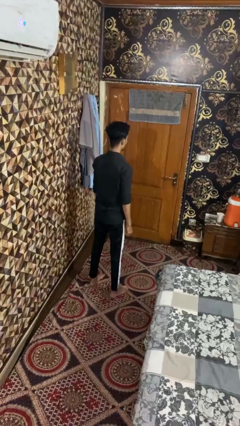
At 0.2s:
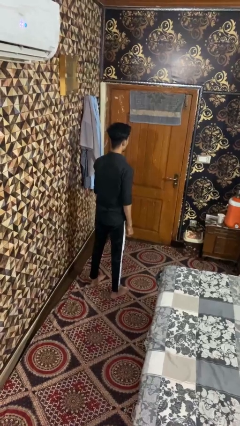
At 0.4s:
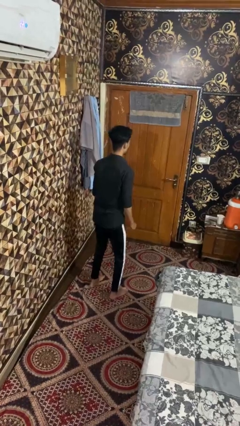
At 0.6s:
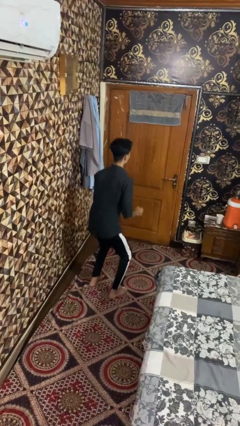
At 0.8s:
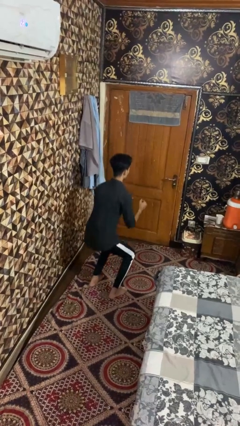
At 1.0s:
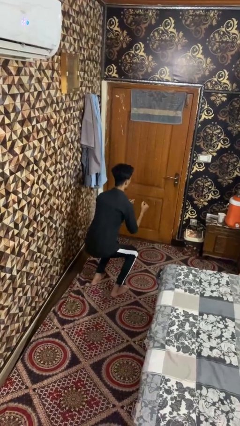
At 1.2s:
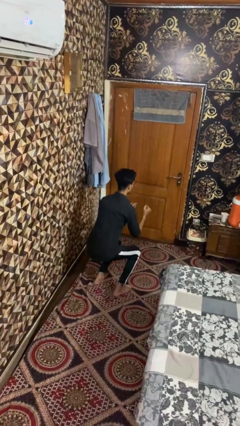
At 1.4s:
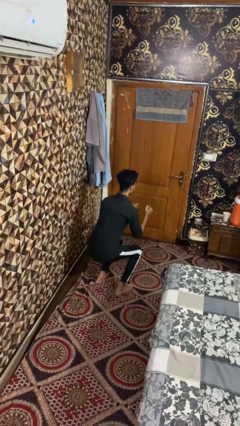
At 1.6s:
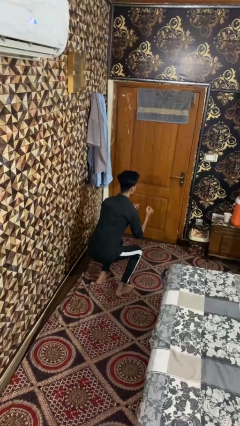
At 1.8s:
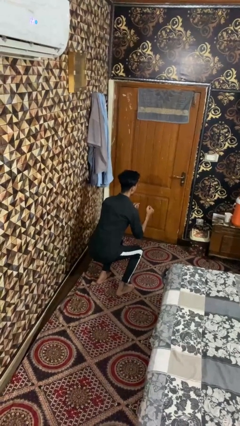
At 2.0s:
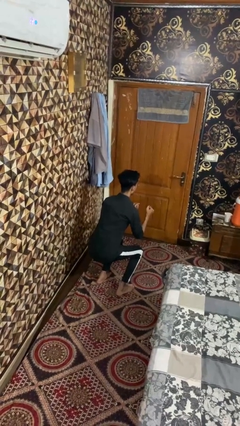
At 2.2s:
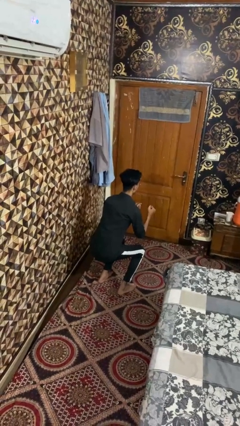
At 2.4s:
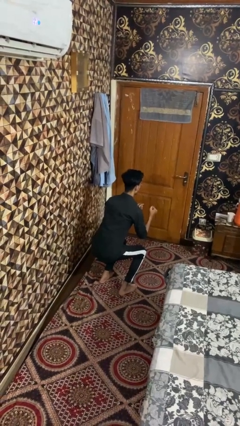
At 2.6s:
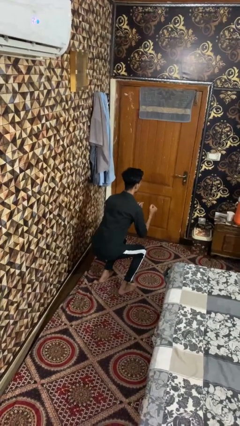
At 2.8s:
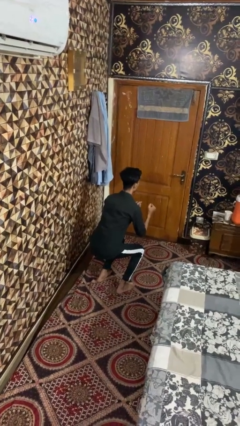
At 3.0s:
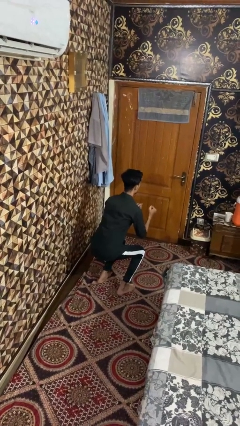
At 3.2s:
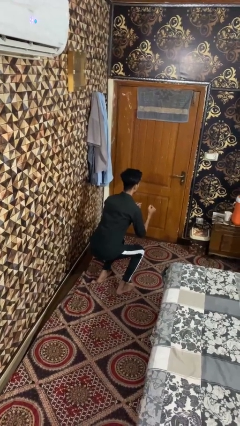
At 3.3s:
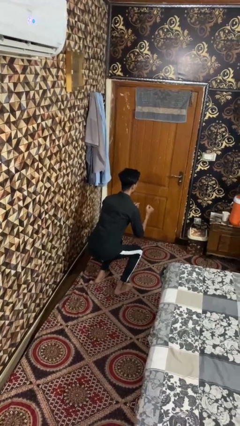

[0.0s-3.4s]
person squats

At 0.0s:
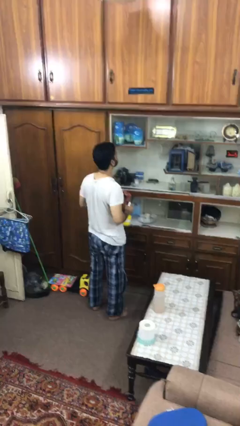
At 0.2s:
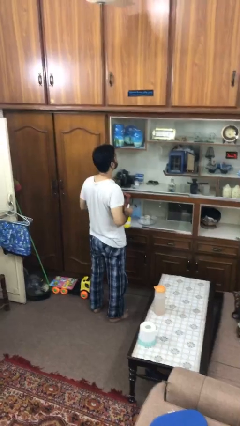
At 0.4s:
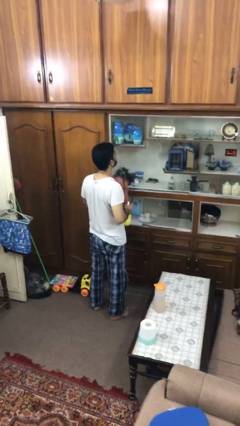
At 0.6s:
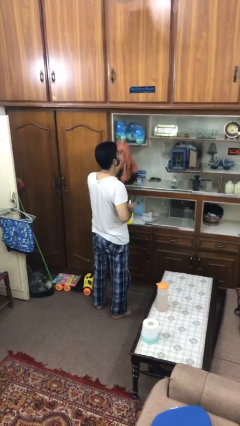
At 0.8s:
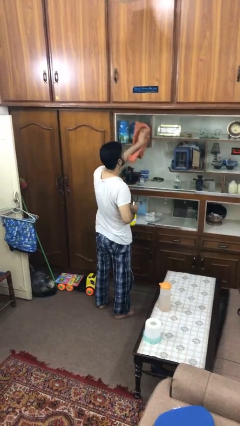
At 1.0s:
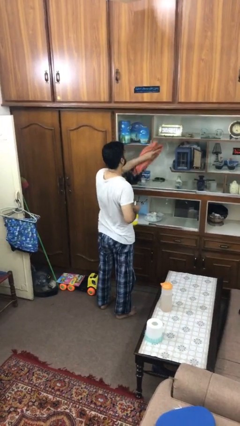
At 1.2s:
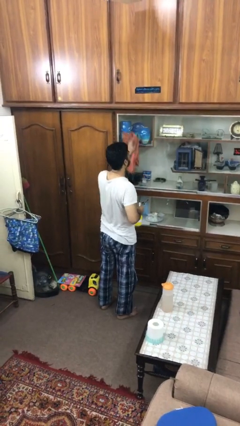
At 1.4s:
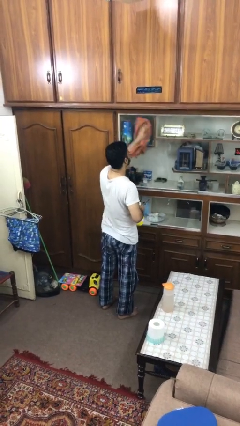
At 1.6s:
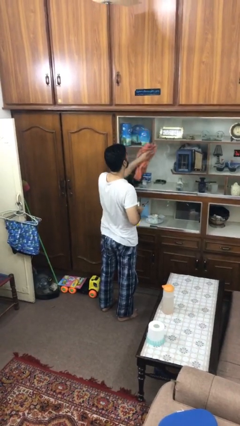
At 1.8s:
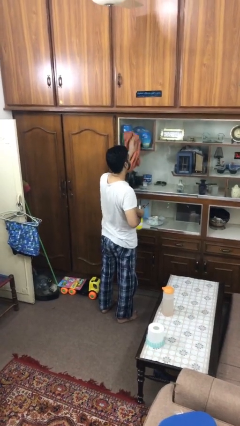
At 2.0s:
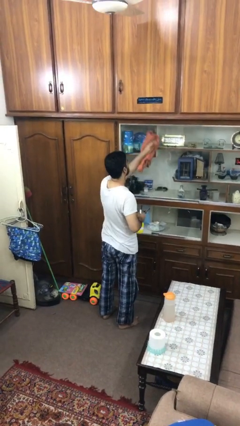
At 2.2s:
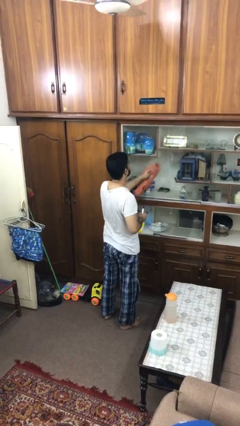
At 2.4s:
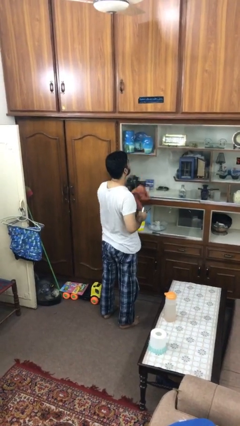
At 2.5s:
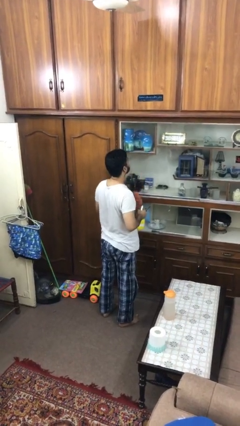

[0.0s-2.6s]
person washes window

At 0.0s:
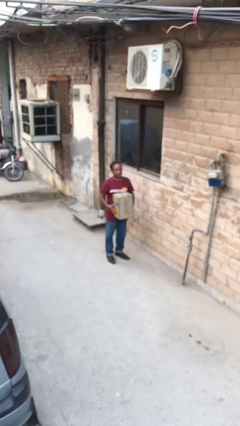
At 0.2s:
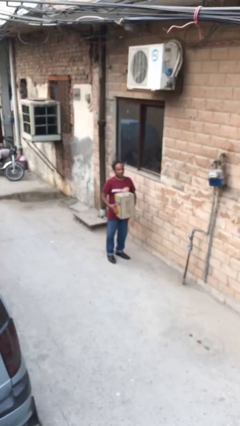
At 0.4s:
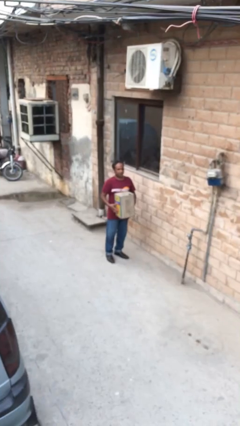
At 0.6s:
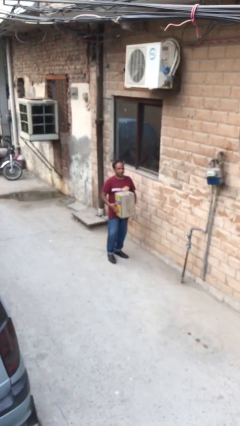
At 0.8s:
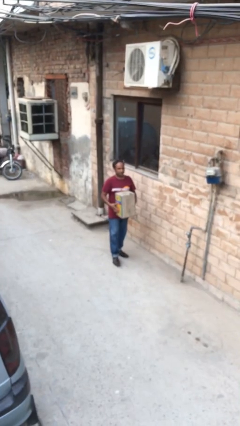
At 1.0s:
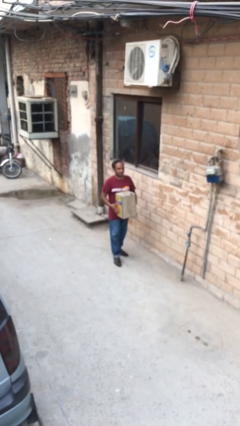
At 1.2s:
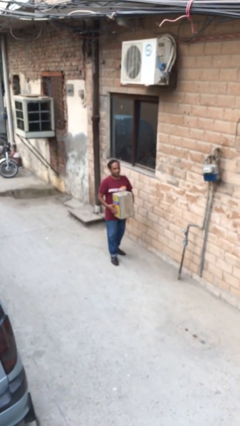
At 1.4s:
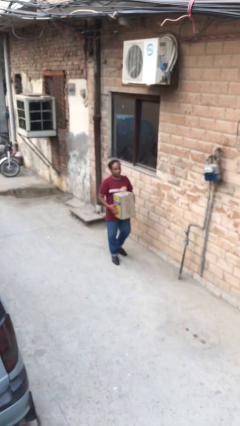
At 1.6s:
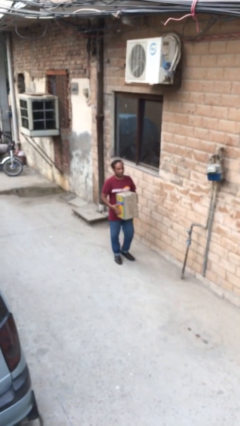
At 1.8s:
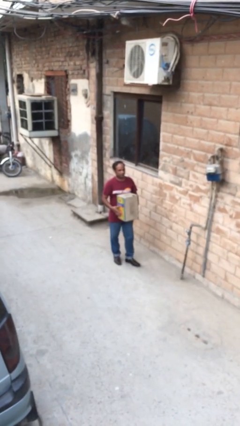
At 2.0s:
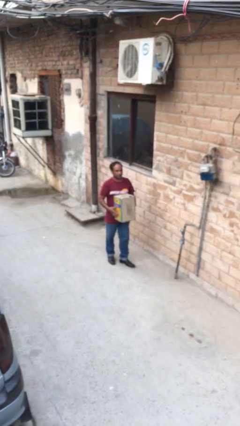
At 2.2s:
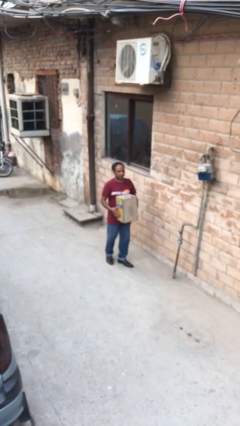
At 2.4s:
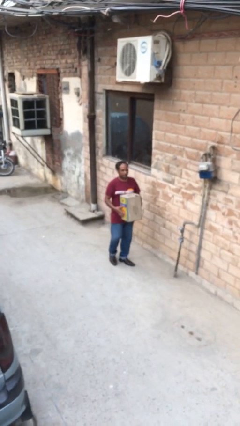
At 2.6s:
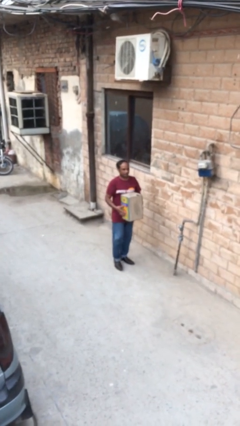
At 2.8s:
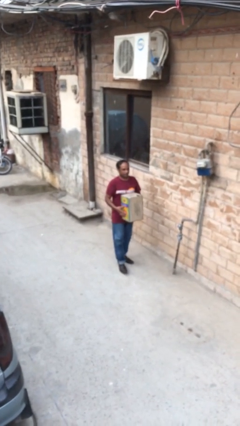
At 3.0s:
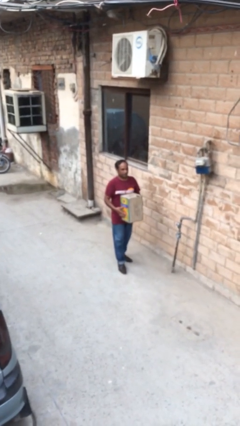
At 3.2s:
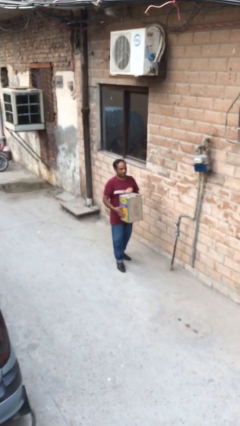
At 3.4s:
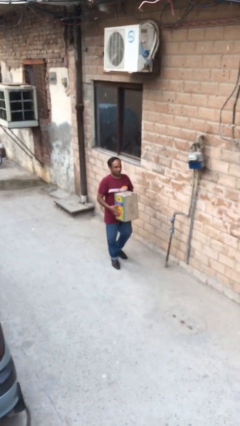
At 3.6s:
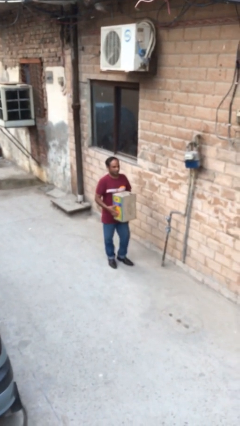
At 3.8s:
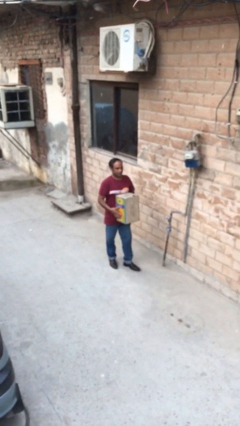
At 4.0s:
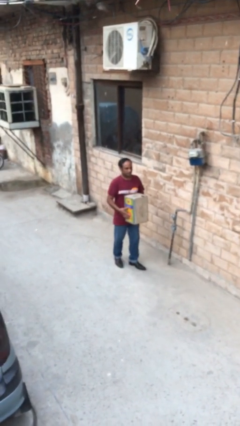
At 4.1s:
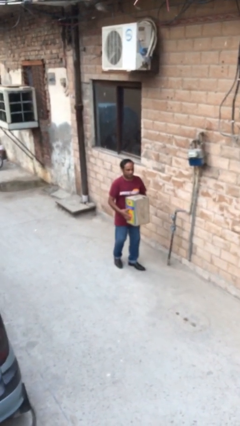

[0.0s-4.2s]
person carries heavy object

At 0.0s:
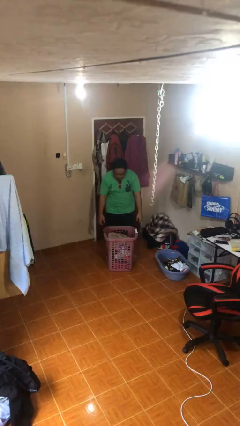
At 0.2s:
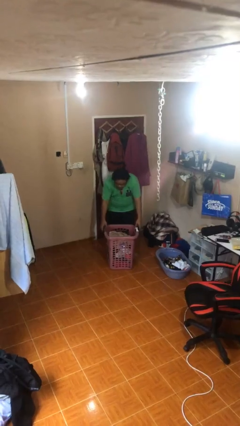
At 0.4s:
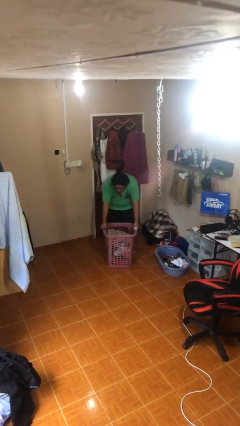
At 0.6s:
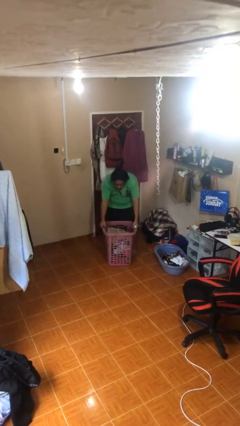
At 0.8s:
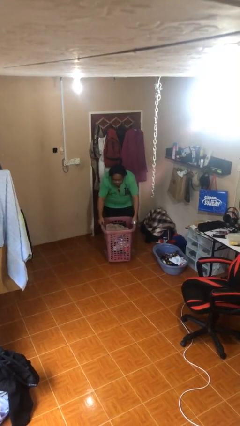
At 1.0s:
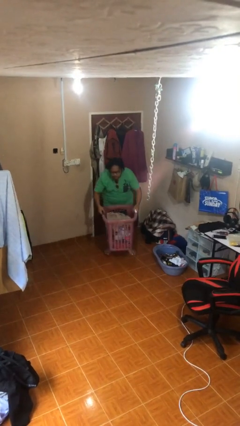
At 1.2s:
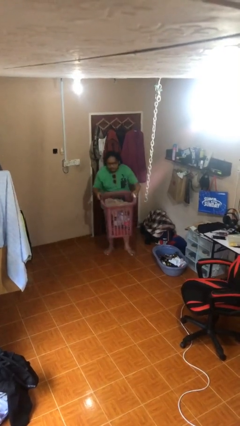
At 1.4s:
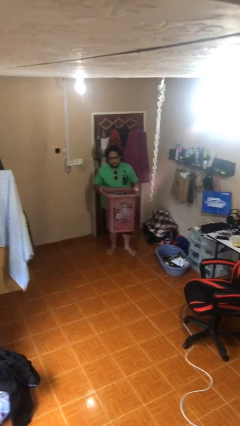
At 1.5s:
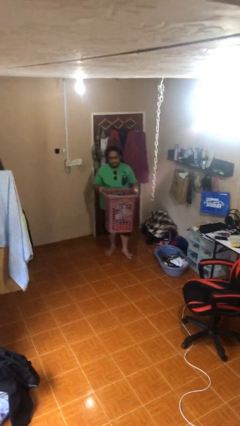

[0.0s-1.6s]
person picks up object from floor

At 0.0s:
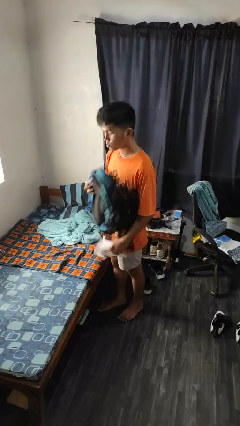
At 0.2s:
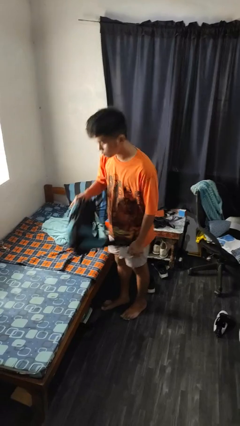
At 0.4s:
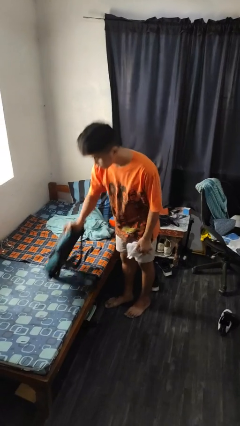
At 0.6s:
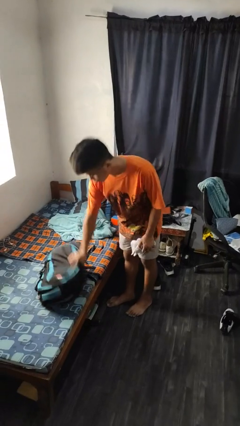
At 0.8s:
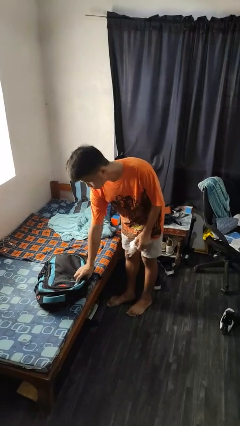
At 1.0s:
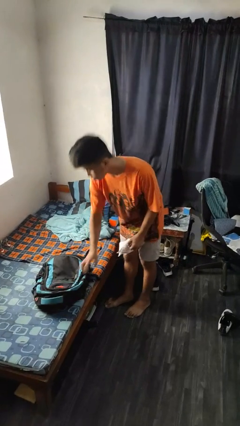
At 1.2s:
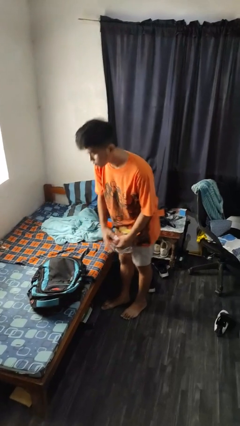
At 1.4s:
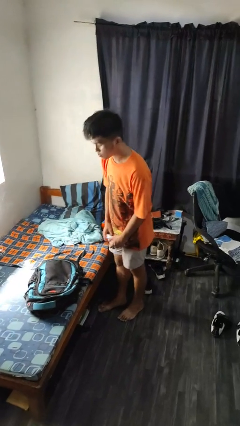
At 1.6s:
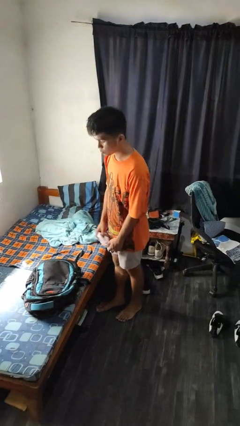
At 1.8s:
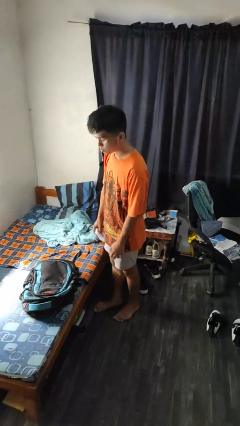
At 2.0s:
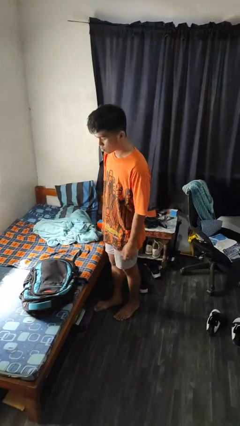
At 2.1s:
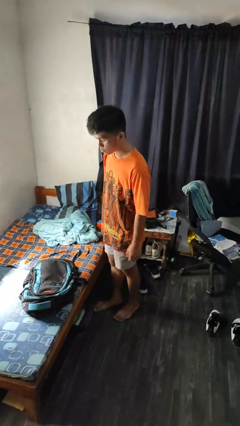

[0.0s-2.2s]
person puts down object on bed

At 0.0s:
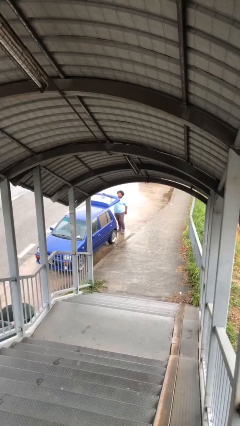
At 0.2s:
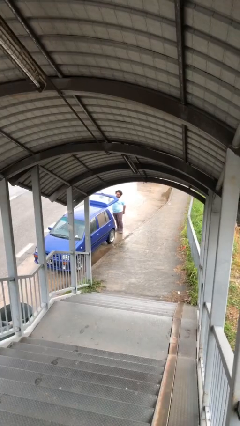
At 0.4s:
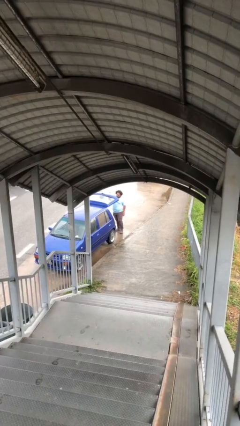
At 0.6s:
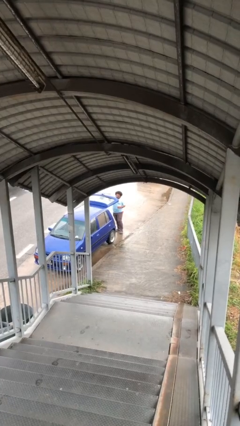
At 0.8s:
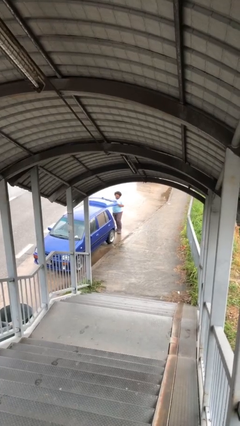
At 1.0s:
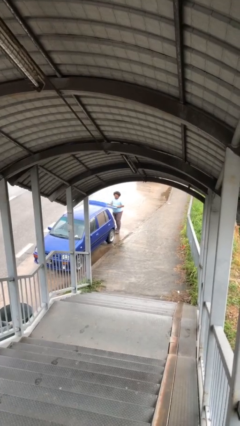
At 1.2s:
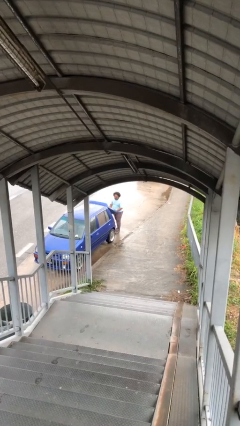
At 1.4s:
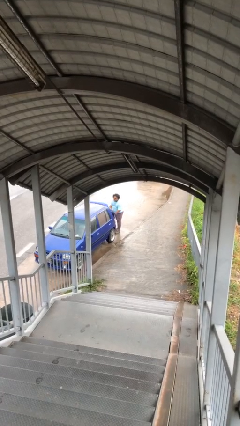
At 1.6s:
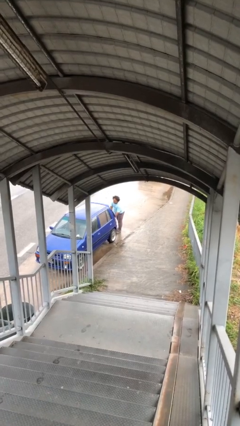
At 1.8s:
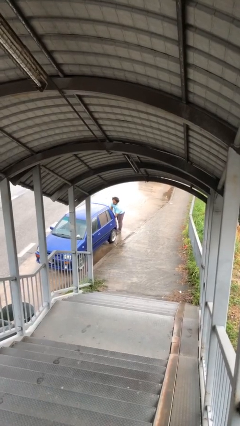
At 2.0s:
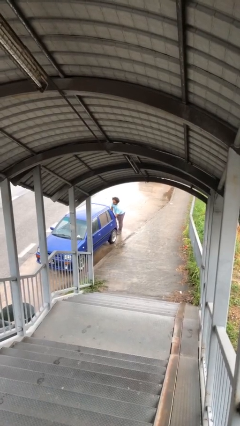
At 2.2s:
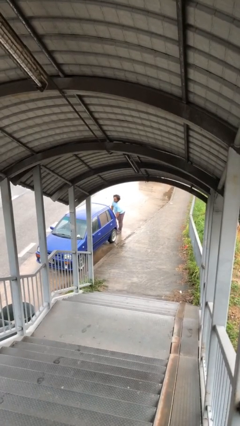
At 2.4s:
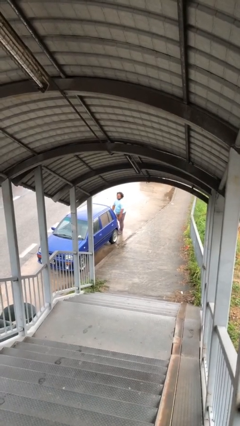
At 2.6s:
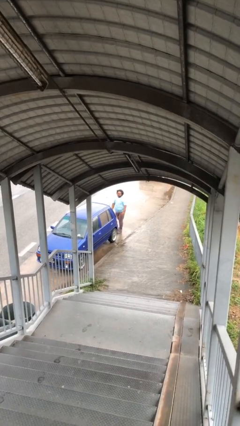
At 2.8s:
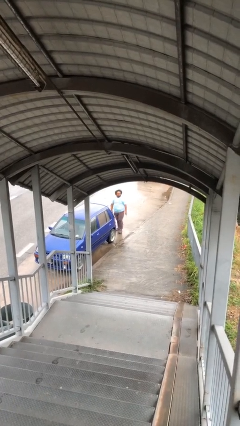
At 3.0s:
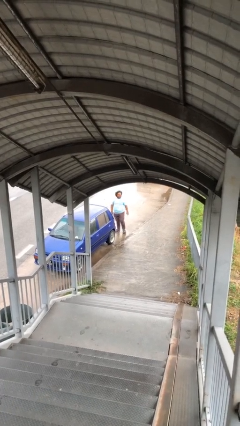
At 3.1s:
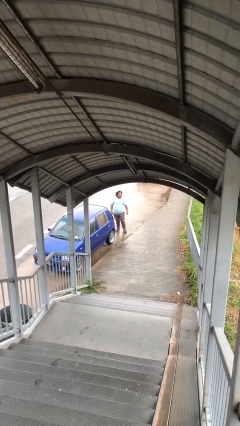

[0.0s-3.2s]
person closes car trunk
